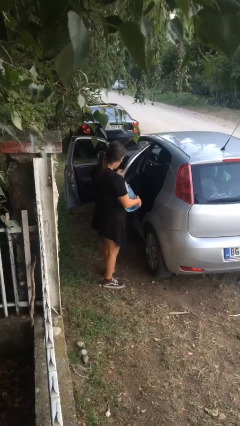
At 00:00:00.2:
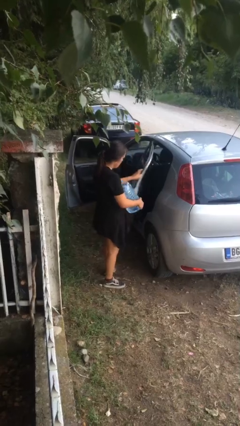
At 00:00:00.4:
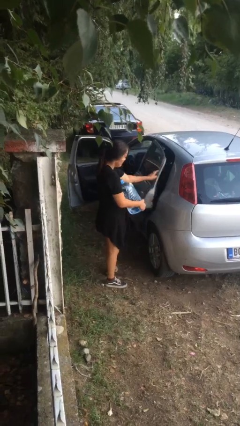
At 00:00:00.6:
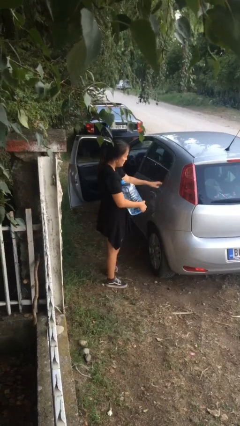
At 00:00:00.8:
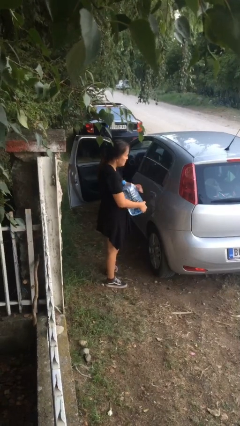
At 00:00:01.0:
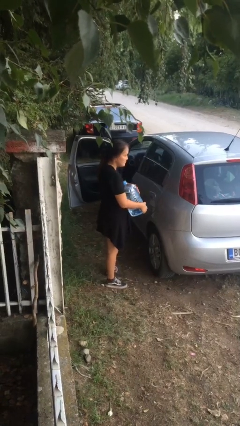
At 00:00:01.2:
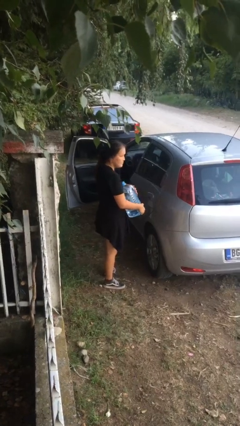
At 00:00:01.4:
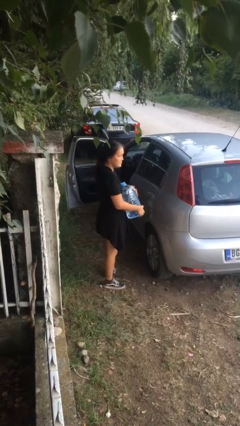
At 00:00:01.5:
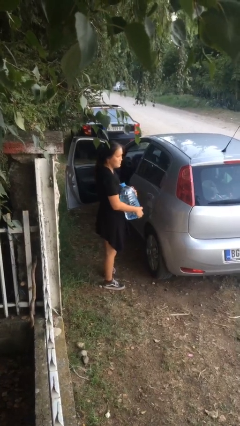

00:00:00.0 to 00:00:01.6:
person closes car door

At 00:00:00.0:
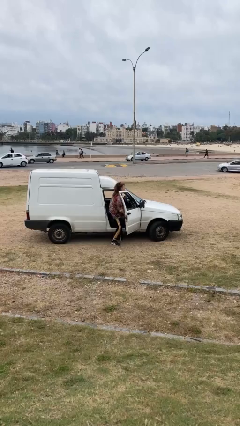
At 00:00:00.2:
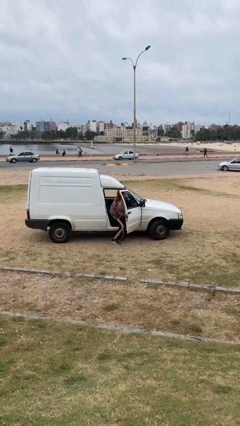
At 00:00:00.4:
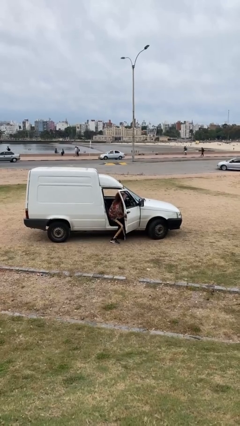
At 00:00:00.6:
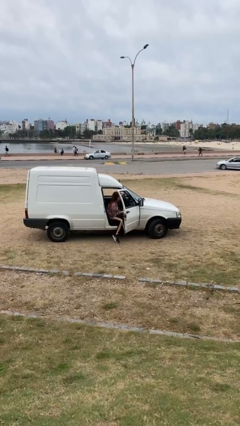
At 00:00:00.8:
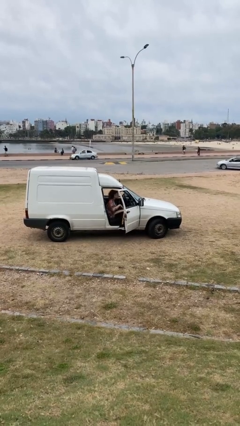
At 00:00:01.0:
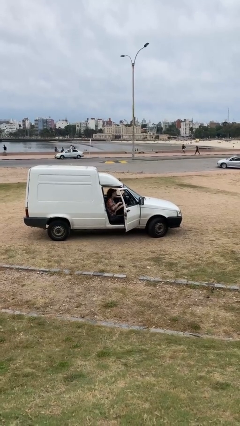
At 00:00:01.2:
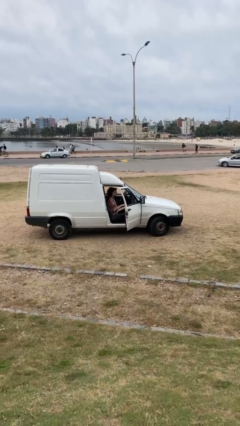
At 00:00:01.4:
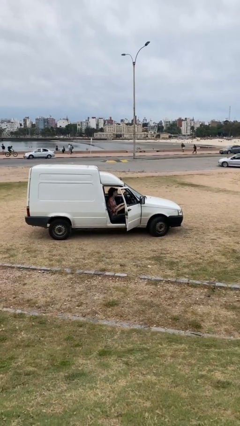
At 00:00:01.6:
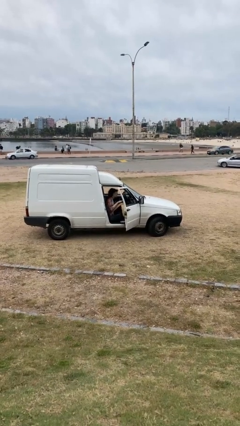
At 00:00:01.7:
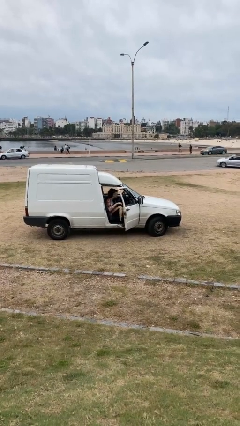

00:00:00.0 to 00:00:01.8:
person enters car

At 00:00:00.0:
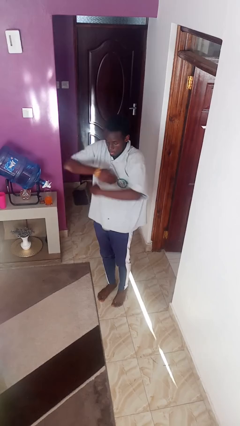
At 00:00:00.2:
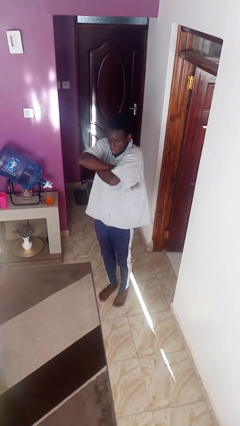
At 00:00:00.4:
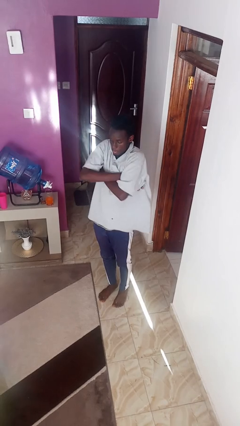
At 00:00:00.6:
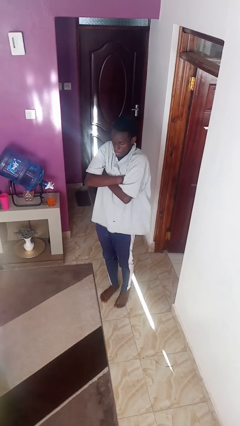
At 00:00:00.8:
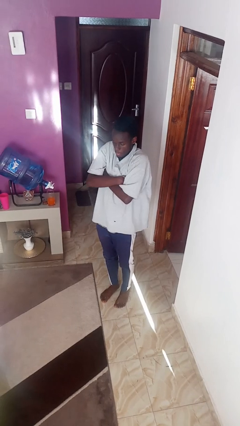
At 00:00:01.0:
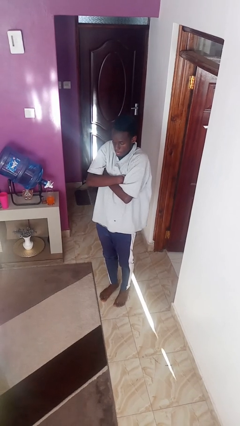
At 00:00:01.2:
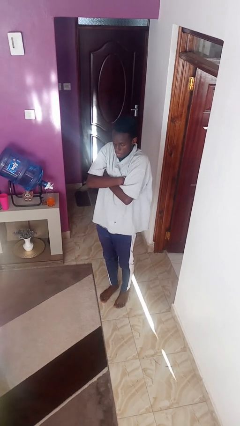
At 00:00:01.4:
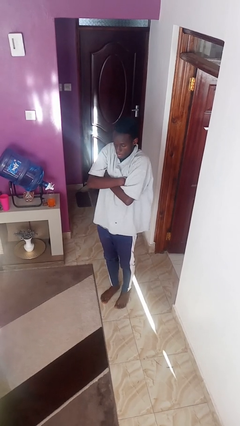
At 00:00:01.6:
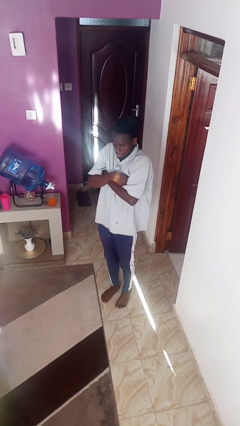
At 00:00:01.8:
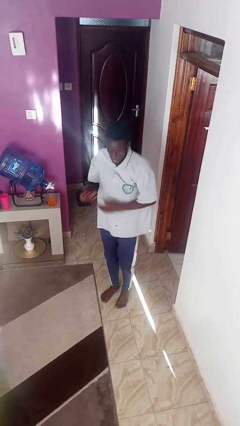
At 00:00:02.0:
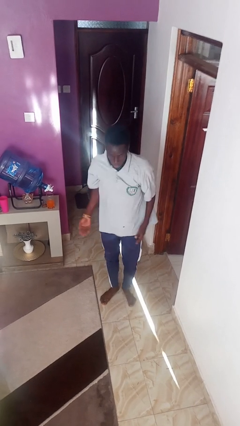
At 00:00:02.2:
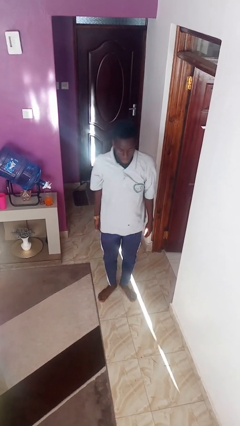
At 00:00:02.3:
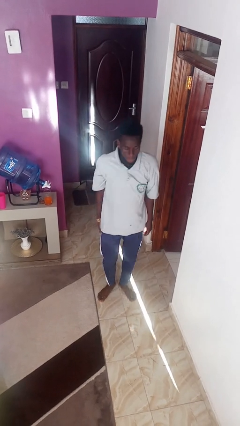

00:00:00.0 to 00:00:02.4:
person crosses arms

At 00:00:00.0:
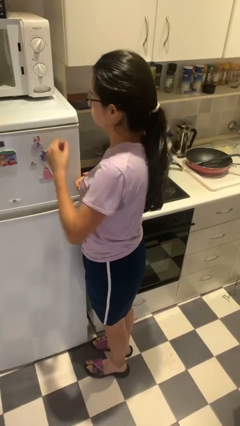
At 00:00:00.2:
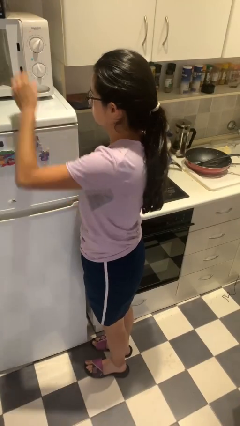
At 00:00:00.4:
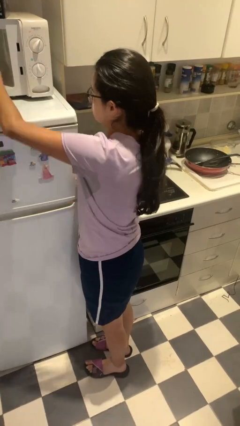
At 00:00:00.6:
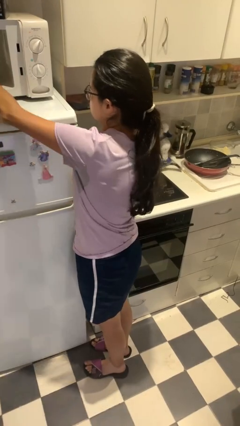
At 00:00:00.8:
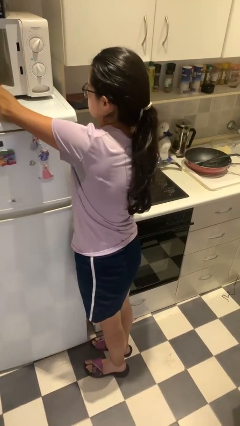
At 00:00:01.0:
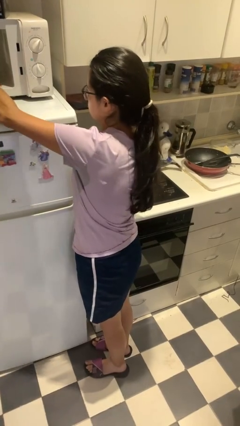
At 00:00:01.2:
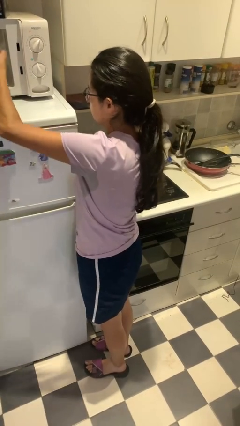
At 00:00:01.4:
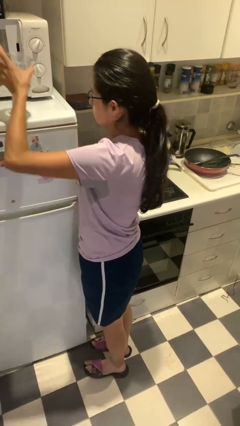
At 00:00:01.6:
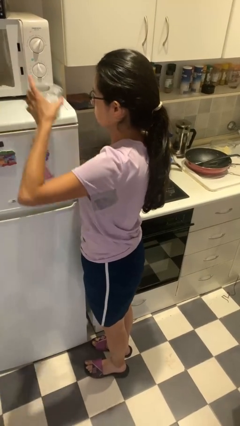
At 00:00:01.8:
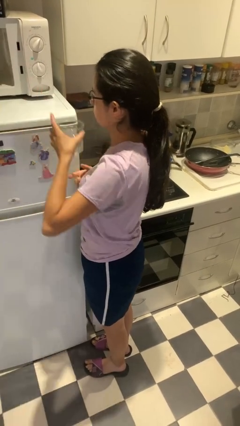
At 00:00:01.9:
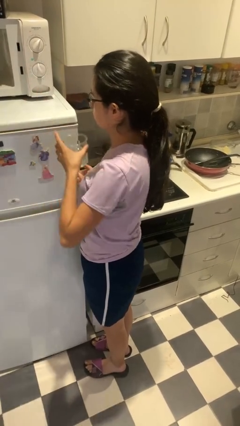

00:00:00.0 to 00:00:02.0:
person takes object from microwave

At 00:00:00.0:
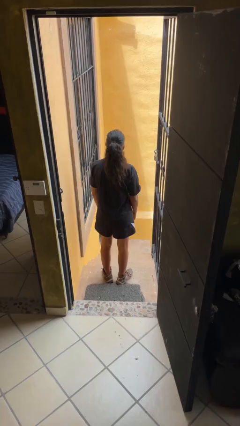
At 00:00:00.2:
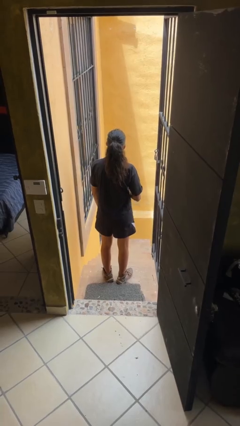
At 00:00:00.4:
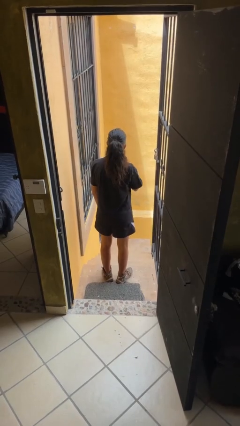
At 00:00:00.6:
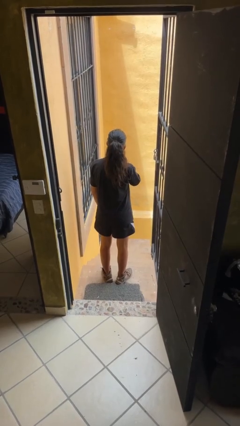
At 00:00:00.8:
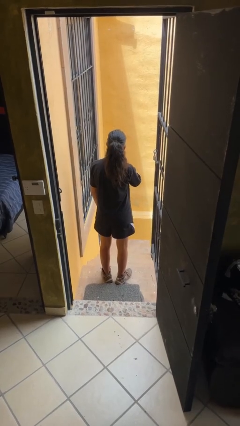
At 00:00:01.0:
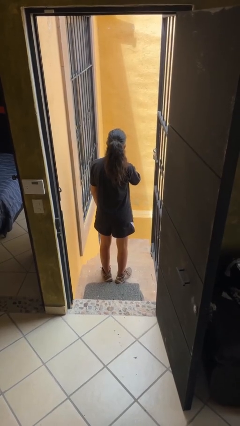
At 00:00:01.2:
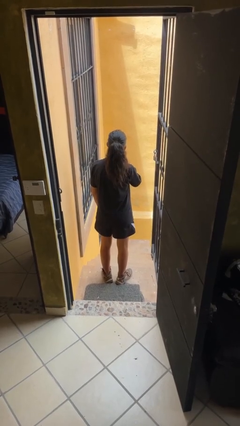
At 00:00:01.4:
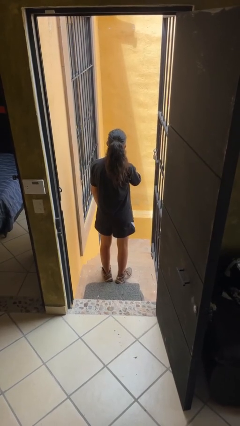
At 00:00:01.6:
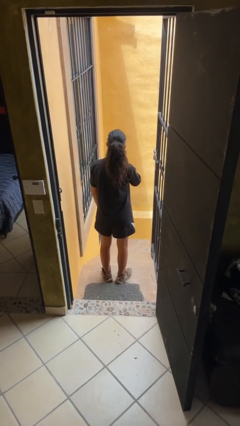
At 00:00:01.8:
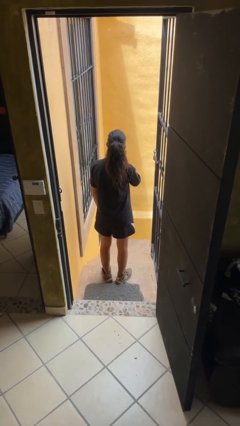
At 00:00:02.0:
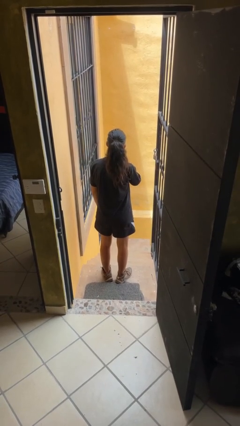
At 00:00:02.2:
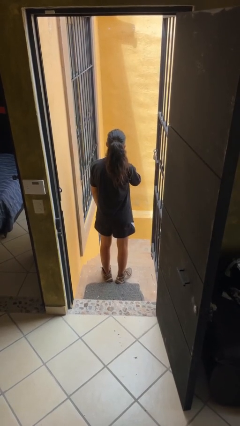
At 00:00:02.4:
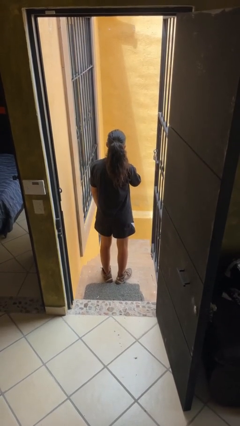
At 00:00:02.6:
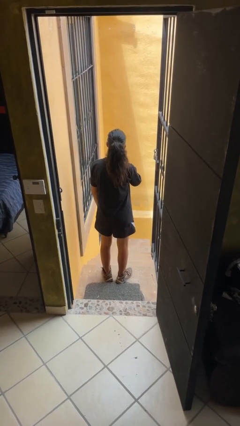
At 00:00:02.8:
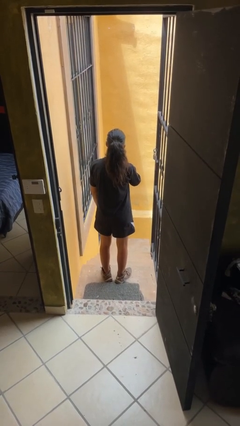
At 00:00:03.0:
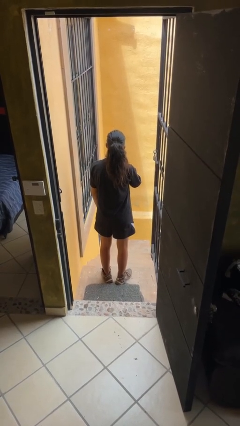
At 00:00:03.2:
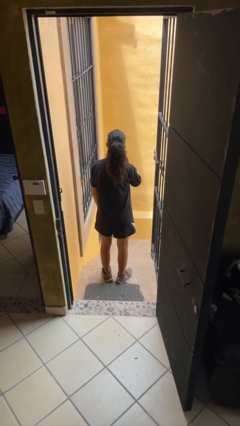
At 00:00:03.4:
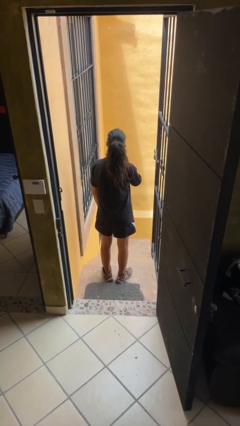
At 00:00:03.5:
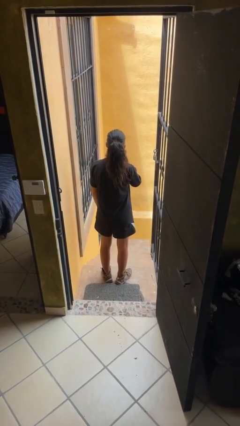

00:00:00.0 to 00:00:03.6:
person scratches face

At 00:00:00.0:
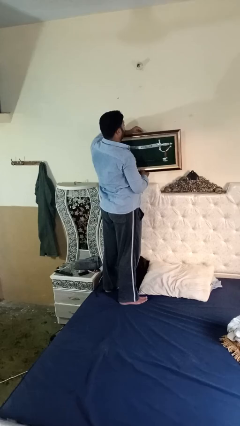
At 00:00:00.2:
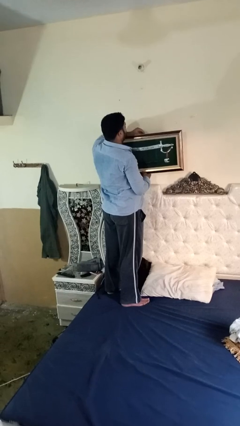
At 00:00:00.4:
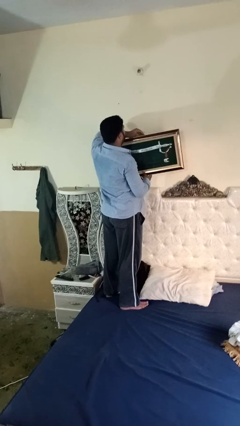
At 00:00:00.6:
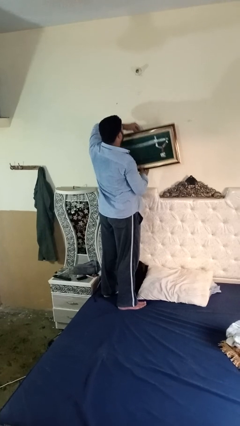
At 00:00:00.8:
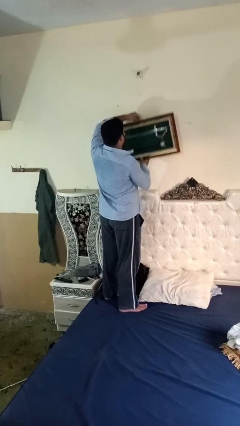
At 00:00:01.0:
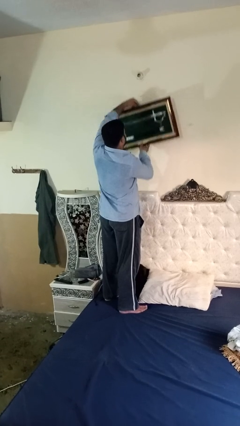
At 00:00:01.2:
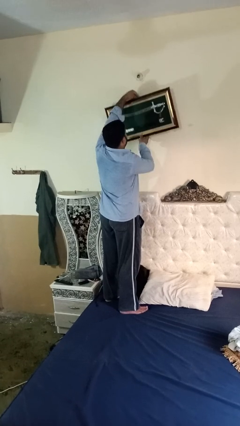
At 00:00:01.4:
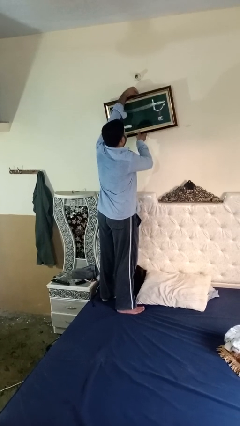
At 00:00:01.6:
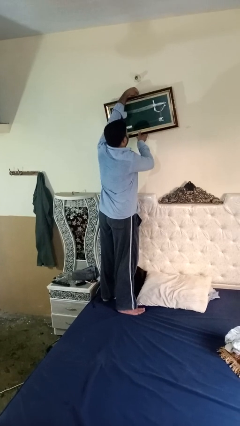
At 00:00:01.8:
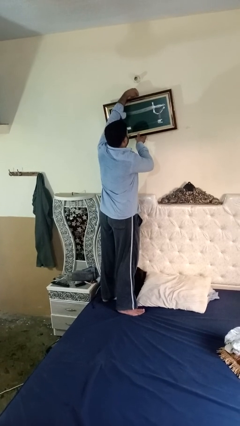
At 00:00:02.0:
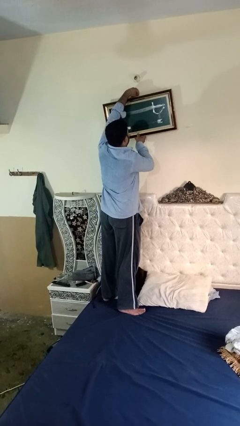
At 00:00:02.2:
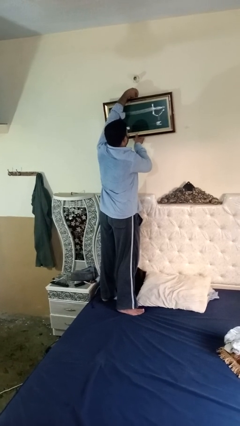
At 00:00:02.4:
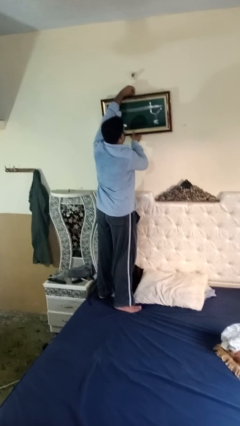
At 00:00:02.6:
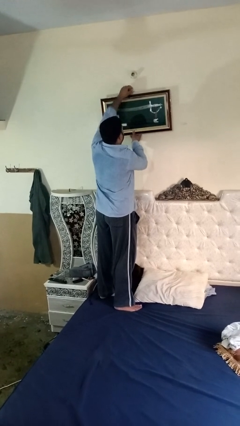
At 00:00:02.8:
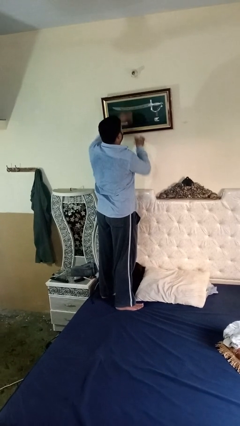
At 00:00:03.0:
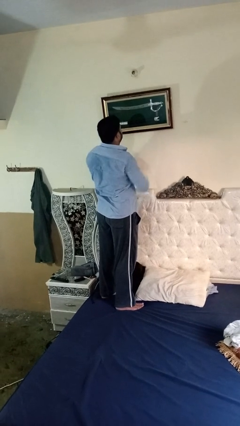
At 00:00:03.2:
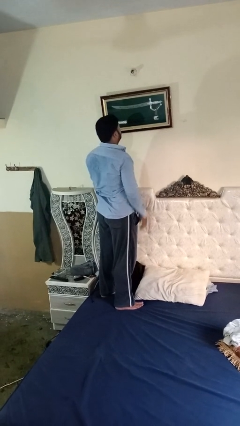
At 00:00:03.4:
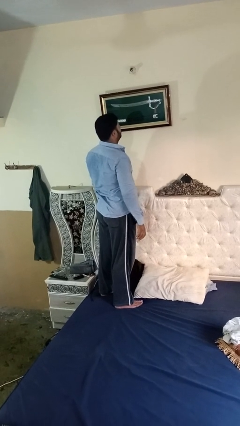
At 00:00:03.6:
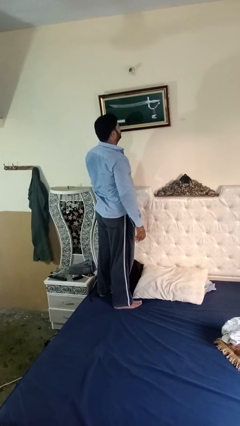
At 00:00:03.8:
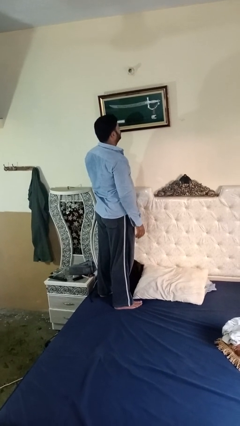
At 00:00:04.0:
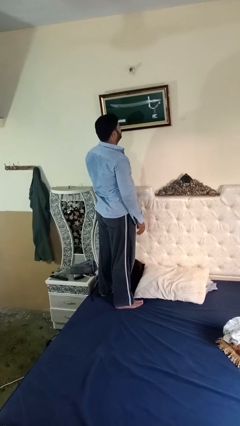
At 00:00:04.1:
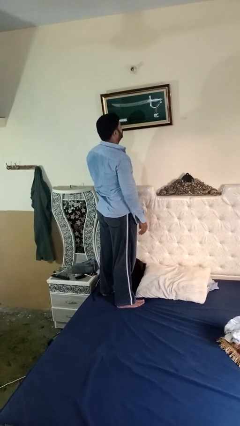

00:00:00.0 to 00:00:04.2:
person puts up picture frame

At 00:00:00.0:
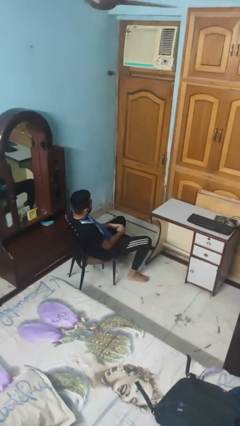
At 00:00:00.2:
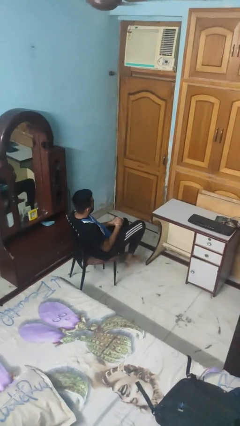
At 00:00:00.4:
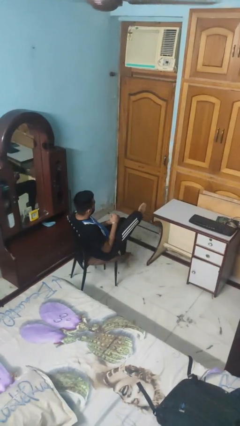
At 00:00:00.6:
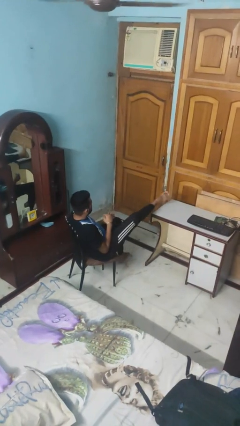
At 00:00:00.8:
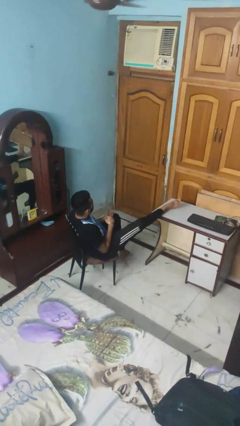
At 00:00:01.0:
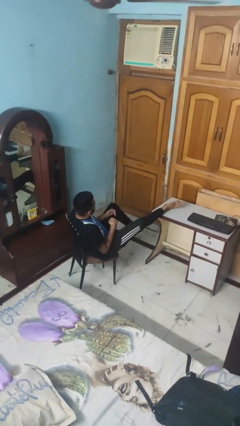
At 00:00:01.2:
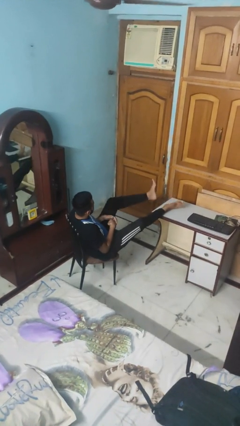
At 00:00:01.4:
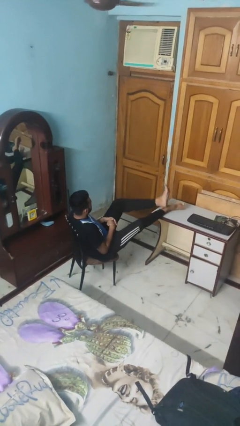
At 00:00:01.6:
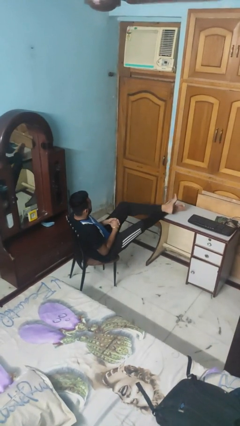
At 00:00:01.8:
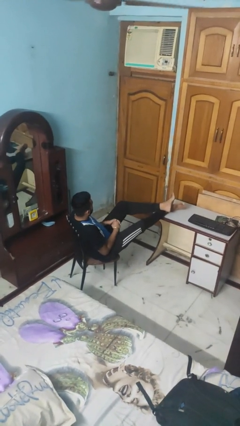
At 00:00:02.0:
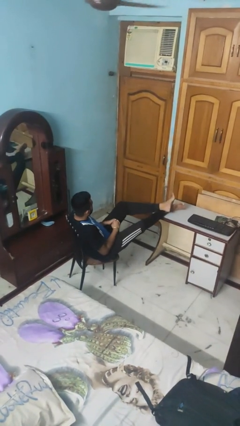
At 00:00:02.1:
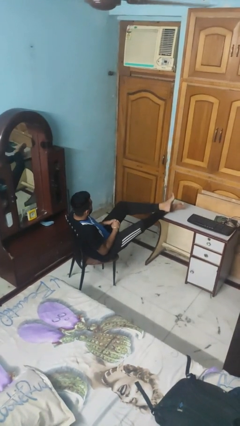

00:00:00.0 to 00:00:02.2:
person puts feet up
